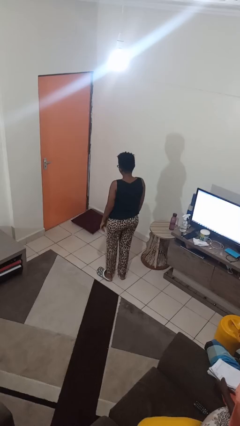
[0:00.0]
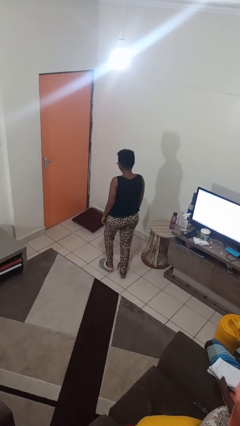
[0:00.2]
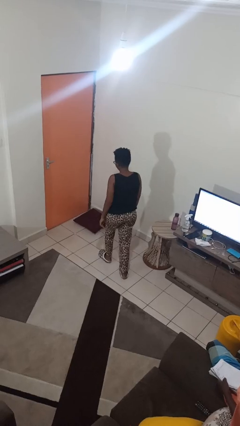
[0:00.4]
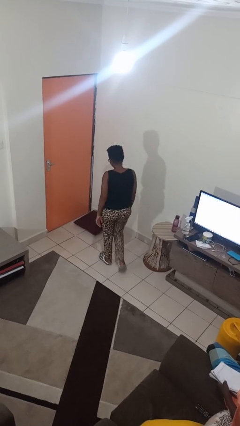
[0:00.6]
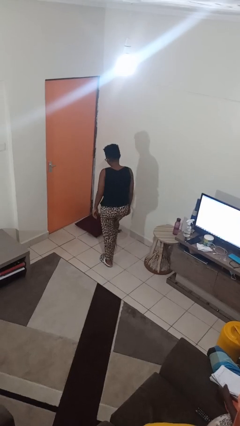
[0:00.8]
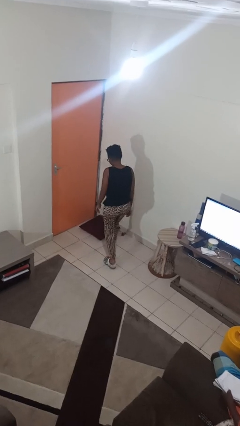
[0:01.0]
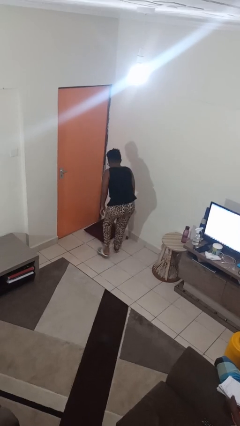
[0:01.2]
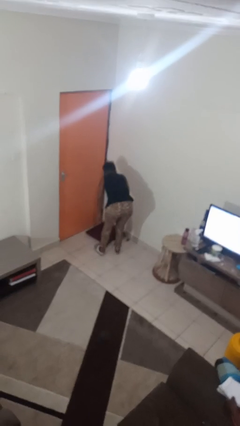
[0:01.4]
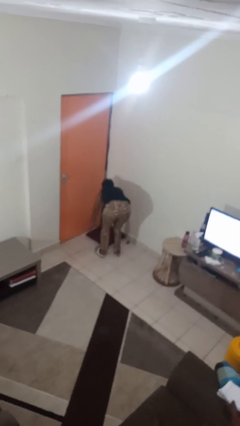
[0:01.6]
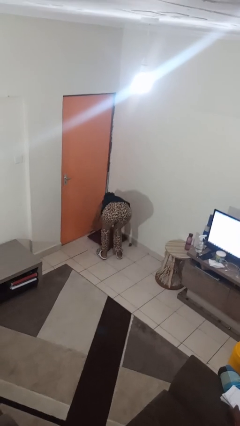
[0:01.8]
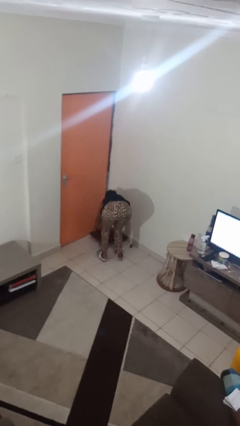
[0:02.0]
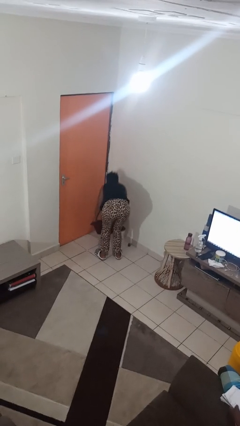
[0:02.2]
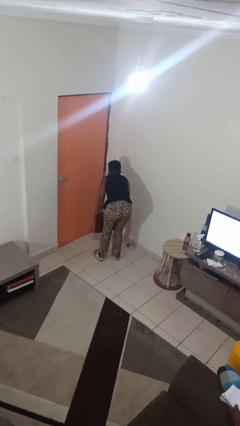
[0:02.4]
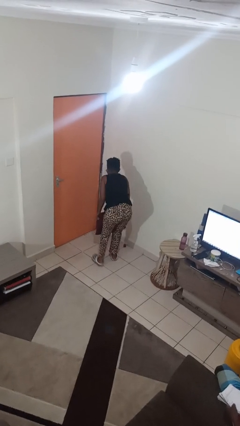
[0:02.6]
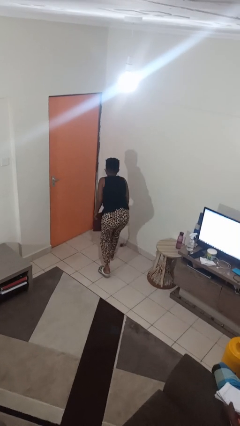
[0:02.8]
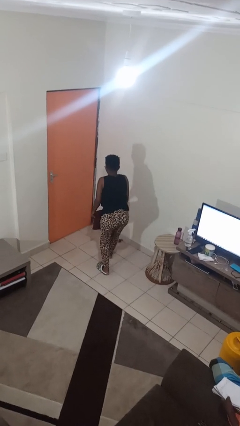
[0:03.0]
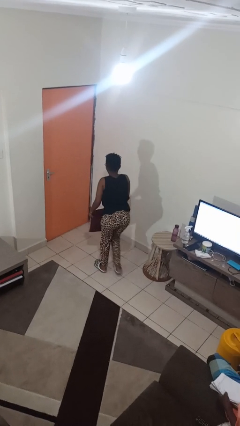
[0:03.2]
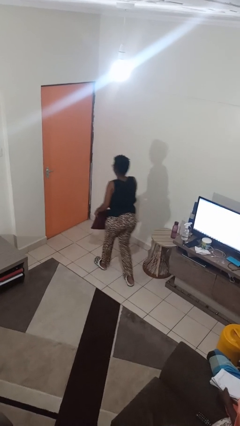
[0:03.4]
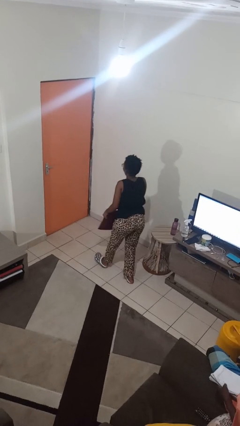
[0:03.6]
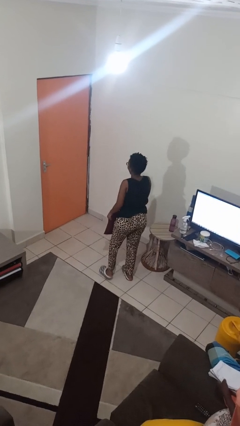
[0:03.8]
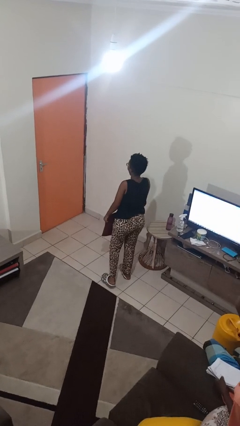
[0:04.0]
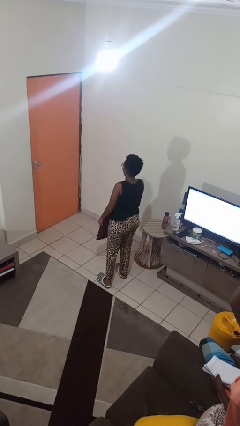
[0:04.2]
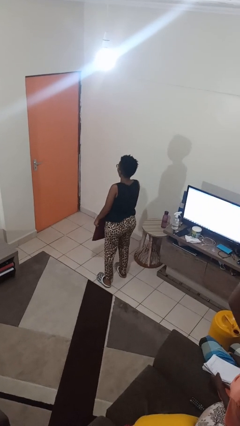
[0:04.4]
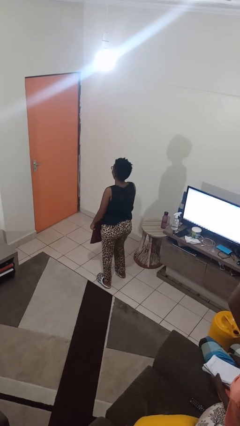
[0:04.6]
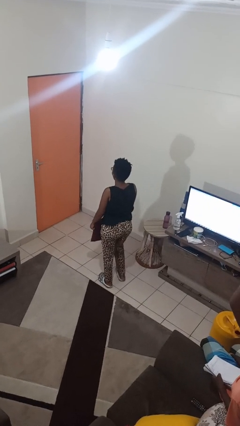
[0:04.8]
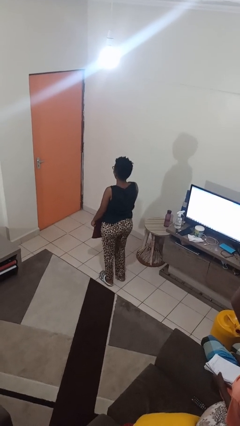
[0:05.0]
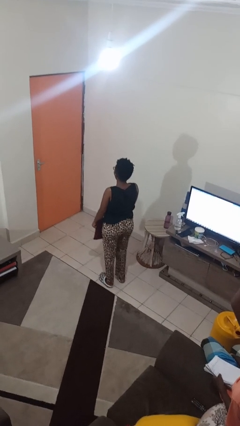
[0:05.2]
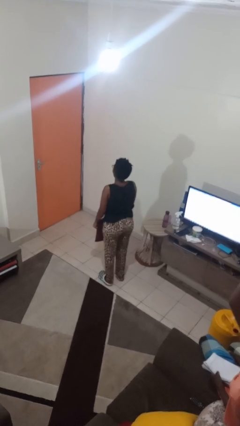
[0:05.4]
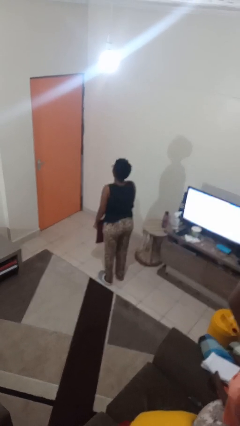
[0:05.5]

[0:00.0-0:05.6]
person picks up object from floor

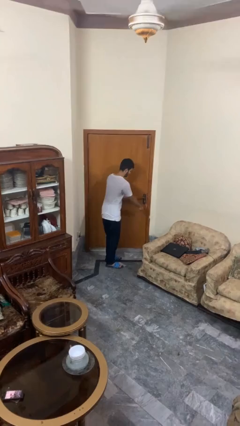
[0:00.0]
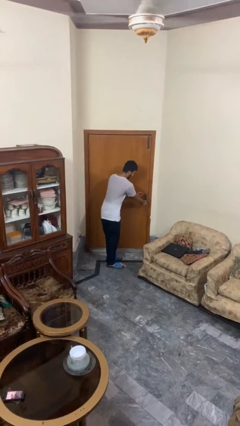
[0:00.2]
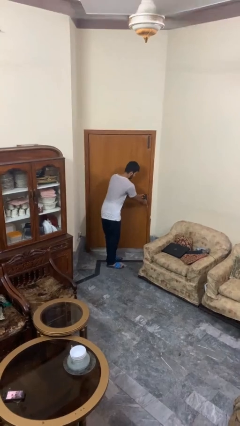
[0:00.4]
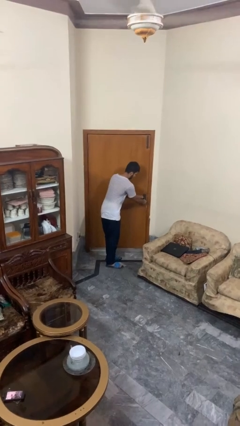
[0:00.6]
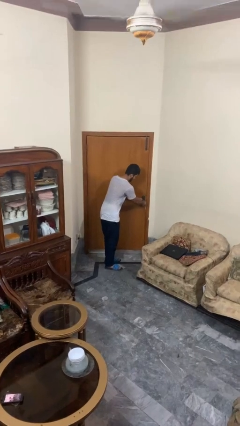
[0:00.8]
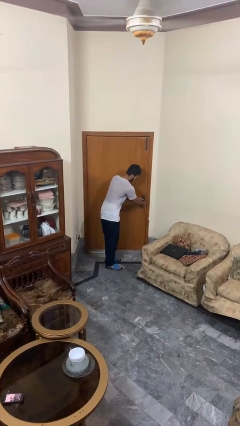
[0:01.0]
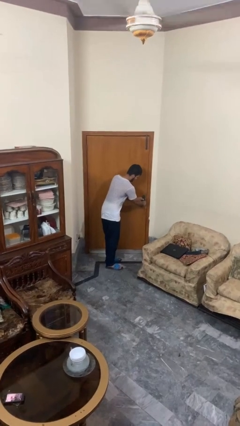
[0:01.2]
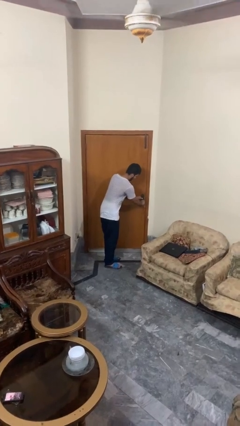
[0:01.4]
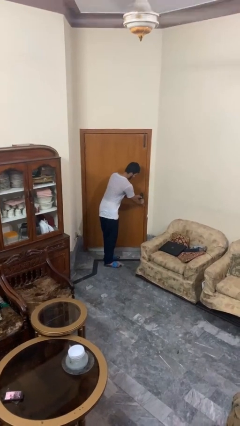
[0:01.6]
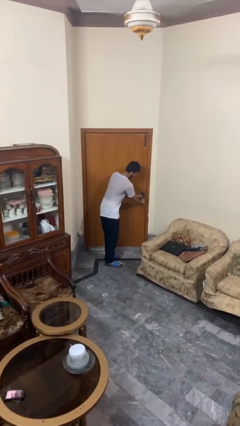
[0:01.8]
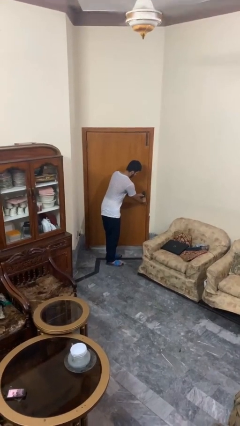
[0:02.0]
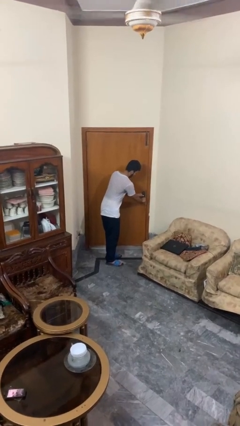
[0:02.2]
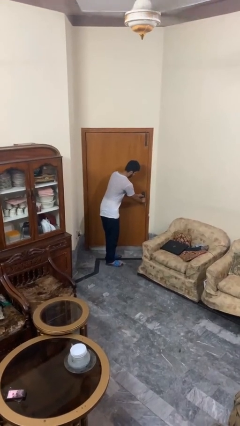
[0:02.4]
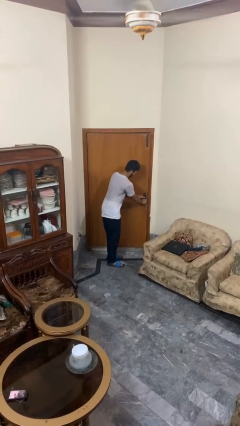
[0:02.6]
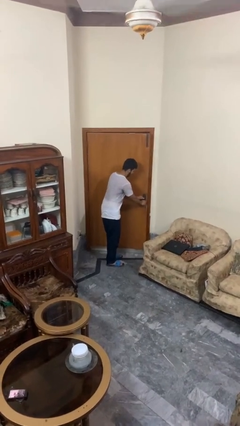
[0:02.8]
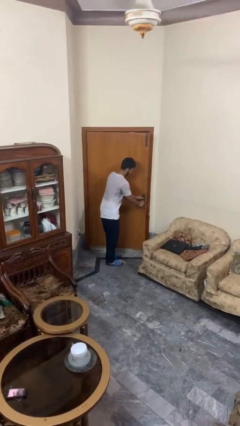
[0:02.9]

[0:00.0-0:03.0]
person unlocks door with keys

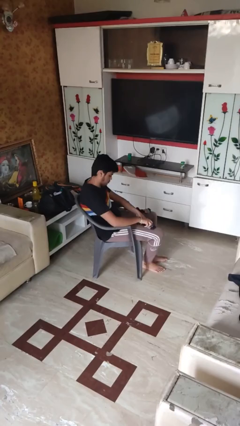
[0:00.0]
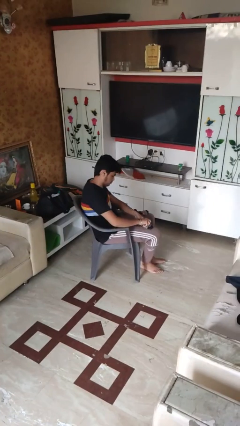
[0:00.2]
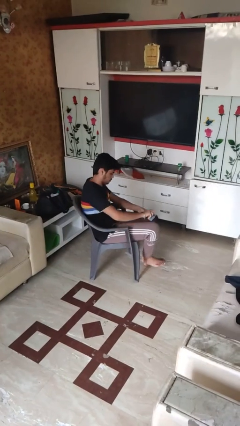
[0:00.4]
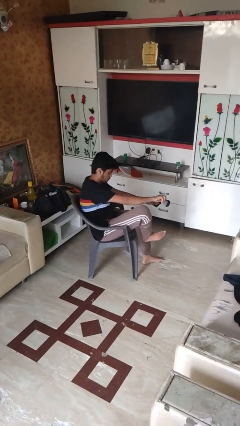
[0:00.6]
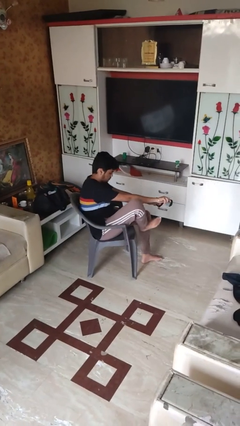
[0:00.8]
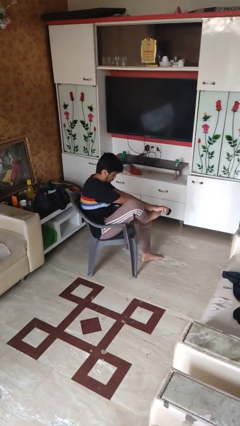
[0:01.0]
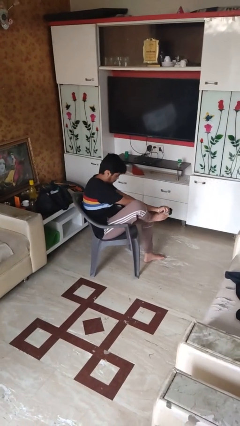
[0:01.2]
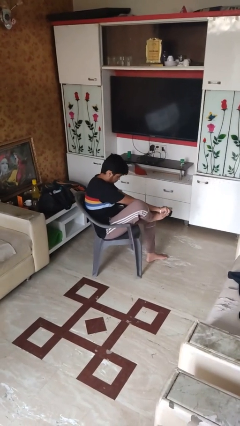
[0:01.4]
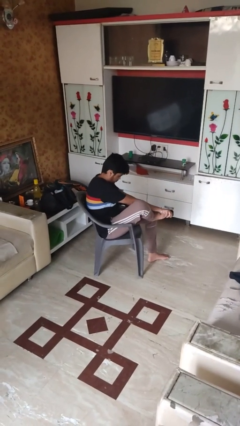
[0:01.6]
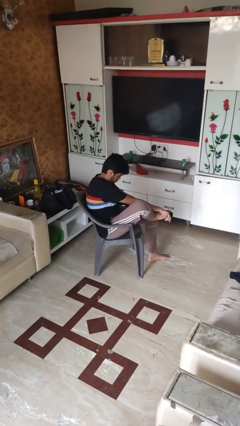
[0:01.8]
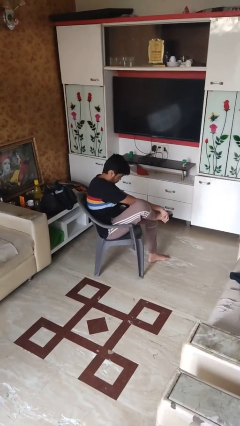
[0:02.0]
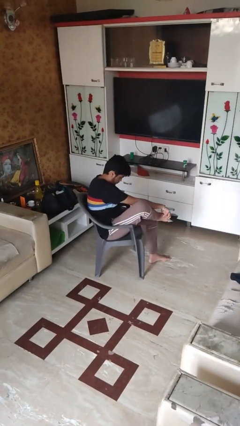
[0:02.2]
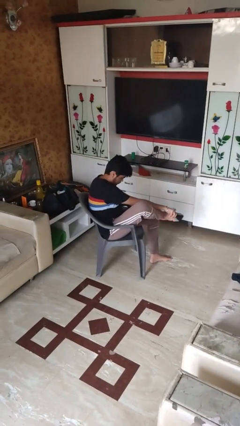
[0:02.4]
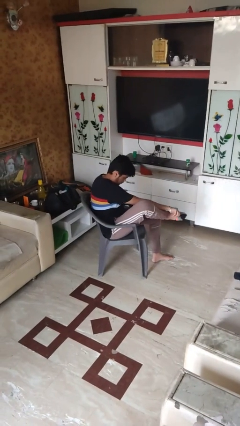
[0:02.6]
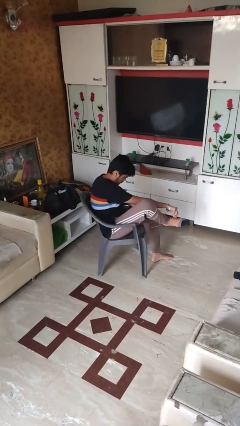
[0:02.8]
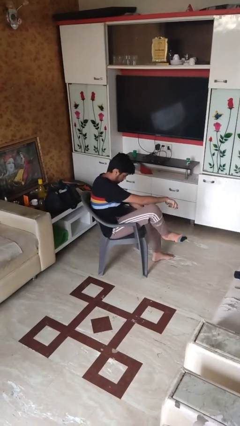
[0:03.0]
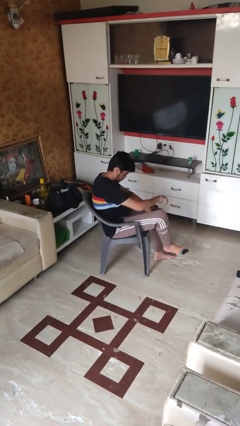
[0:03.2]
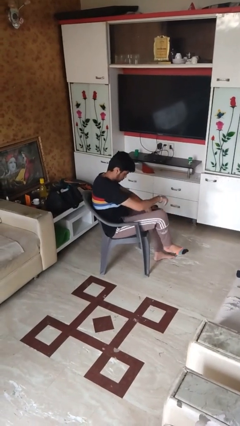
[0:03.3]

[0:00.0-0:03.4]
person puts on socks

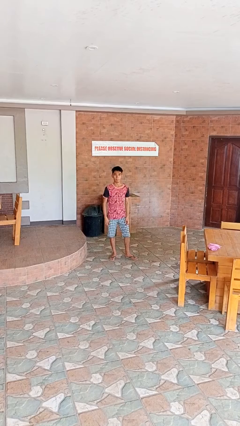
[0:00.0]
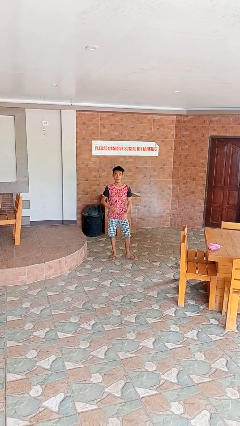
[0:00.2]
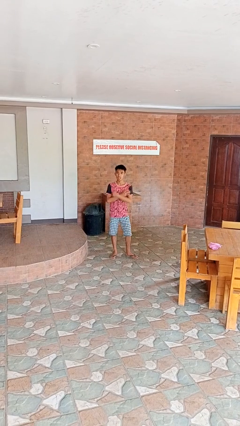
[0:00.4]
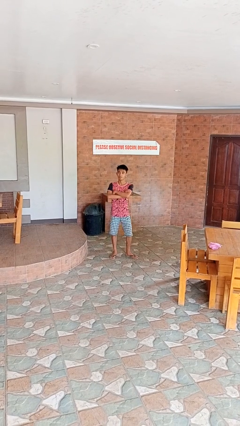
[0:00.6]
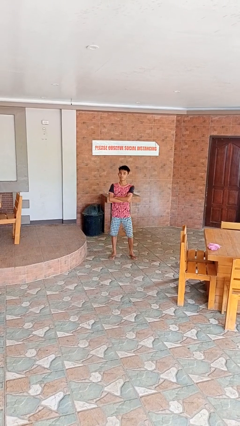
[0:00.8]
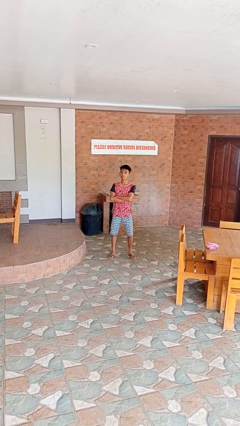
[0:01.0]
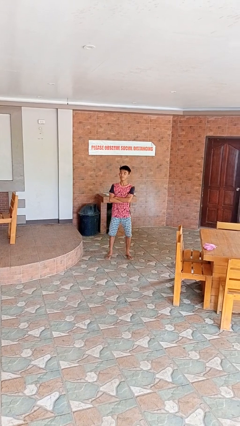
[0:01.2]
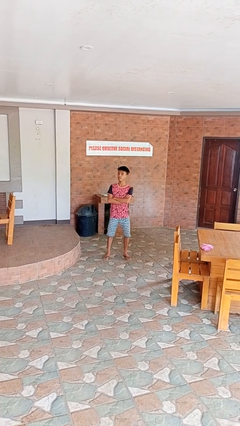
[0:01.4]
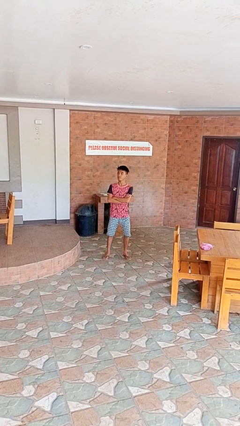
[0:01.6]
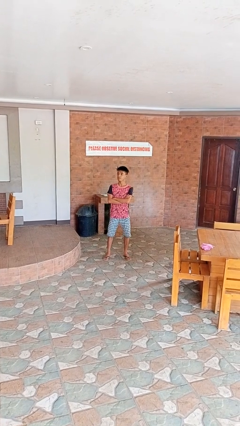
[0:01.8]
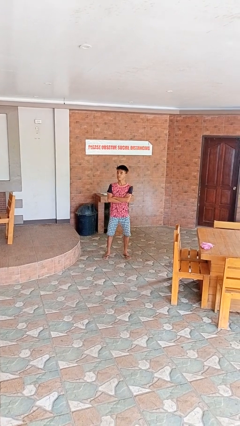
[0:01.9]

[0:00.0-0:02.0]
person crosses arms

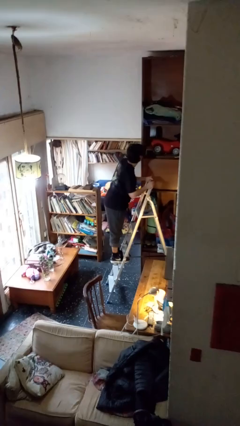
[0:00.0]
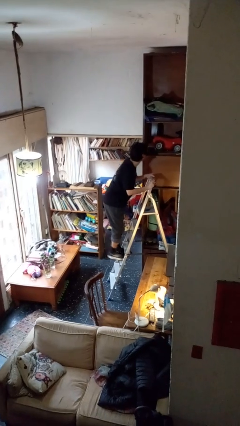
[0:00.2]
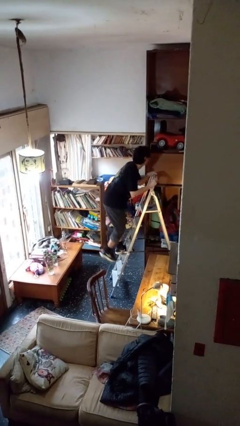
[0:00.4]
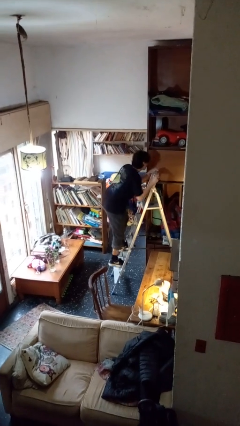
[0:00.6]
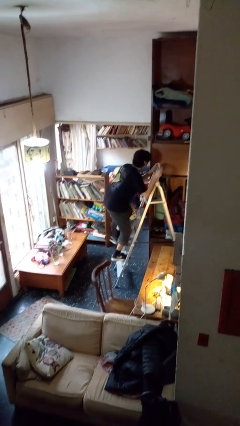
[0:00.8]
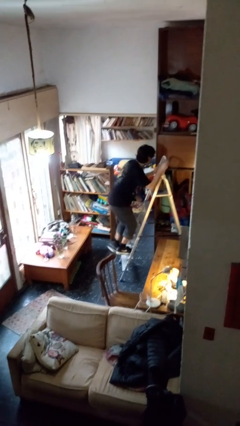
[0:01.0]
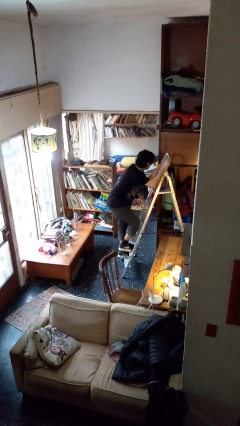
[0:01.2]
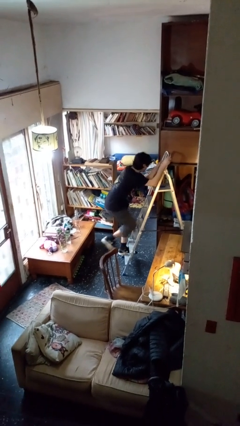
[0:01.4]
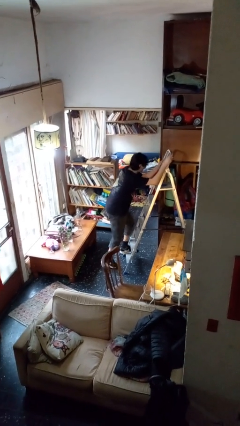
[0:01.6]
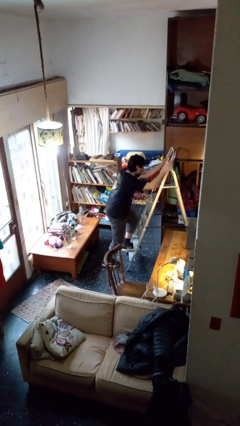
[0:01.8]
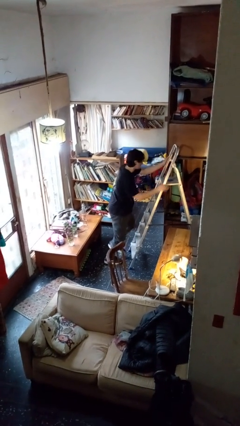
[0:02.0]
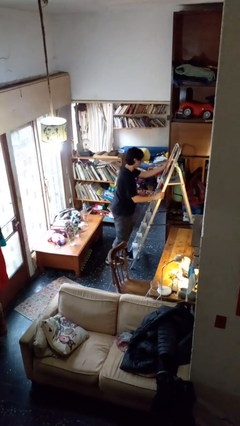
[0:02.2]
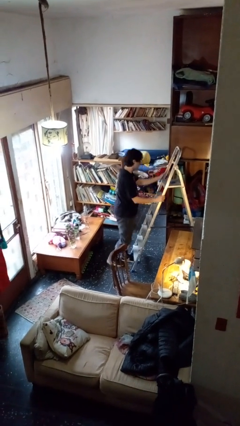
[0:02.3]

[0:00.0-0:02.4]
person climbs down ladder

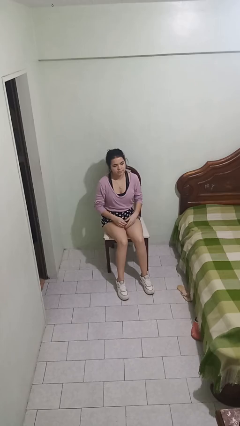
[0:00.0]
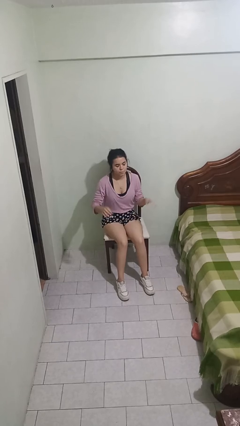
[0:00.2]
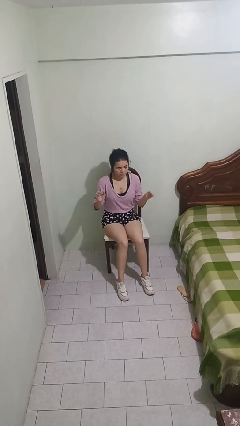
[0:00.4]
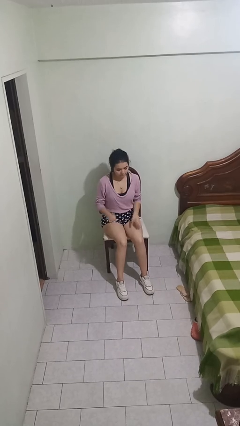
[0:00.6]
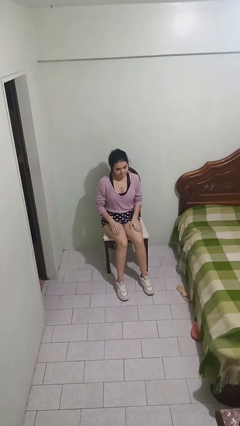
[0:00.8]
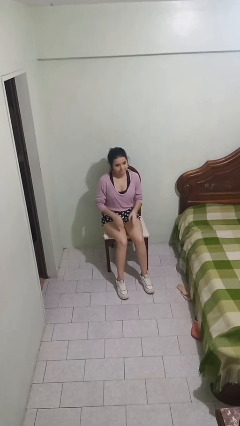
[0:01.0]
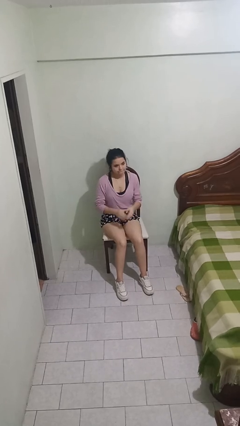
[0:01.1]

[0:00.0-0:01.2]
person slaps hands on thighs
